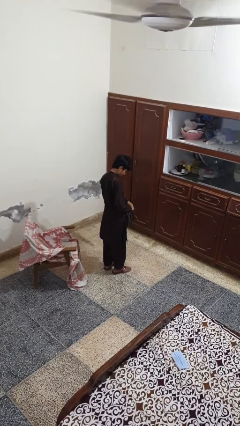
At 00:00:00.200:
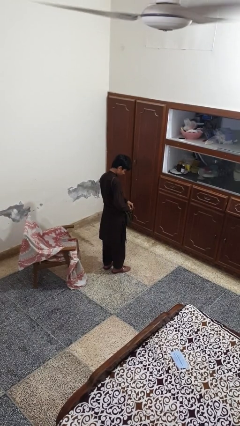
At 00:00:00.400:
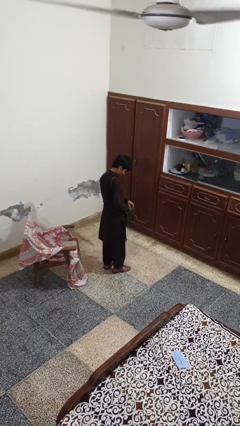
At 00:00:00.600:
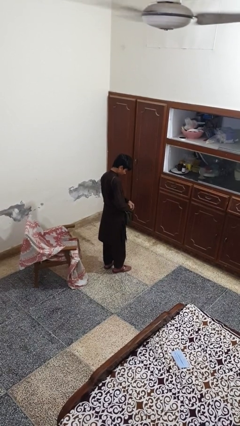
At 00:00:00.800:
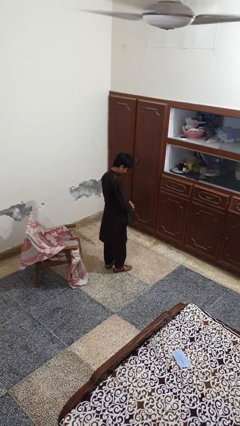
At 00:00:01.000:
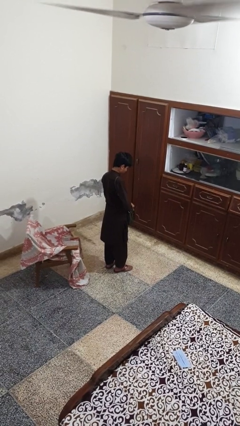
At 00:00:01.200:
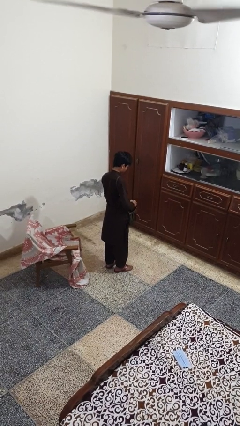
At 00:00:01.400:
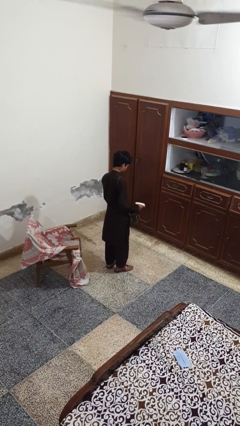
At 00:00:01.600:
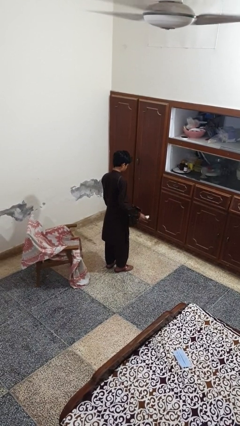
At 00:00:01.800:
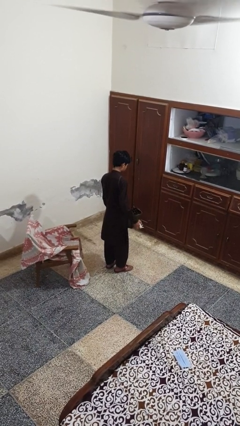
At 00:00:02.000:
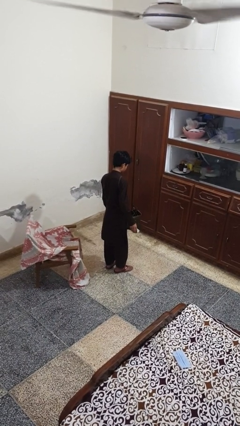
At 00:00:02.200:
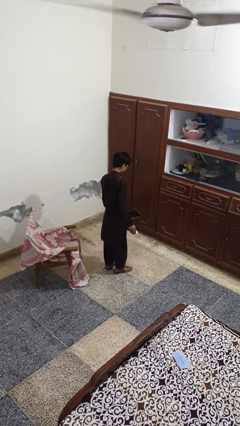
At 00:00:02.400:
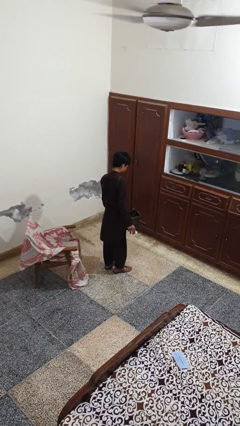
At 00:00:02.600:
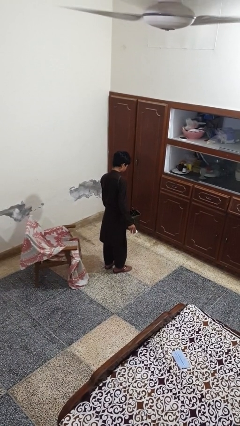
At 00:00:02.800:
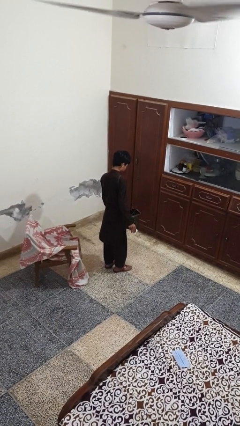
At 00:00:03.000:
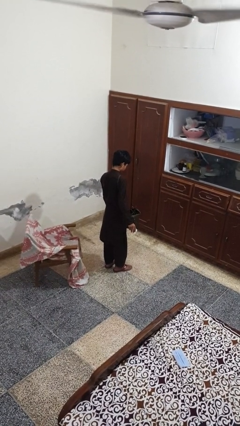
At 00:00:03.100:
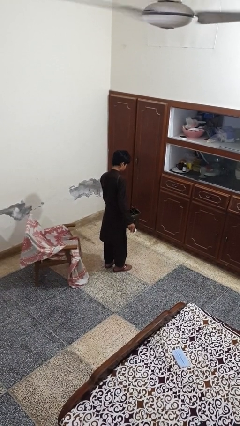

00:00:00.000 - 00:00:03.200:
person takes object from purse

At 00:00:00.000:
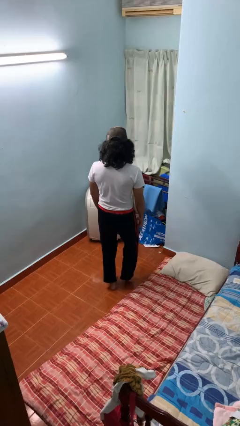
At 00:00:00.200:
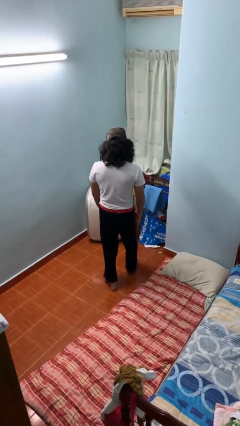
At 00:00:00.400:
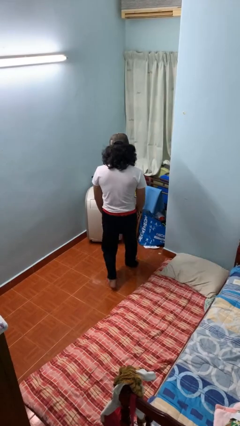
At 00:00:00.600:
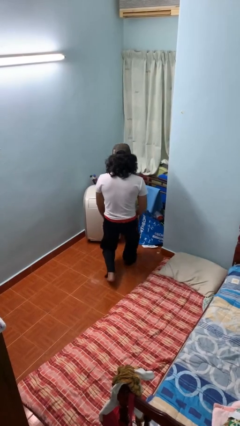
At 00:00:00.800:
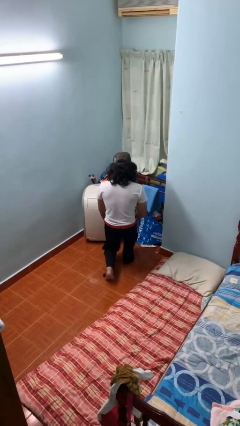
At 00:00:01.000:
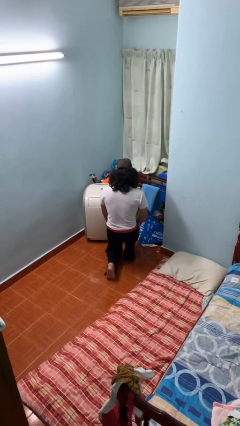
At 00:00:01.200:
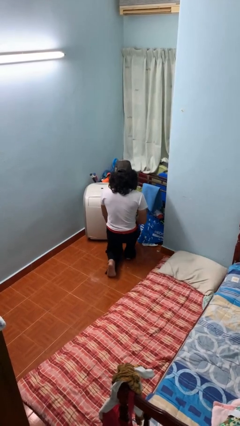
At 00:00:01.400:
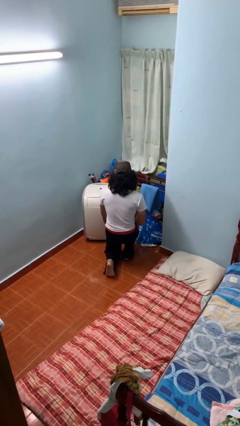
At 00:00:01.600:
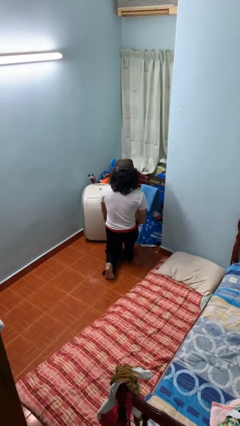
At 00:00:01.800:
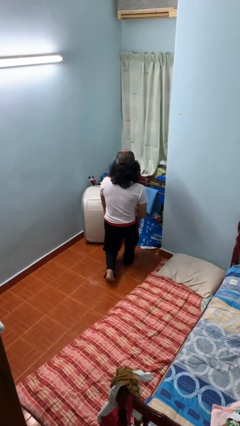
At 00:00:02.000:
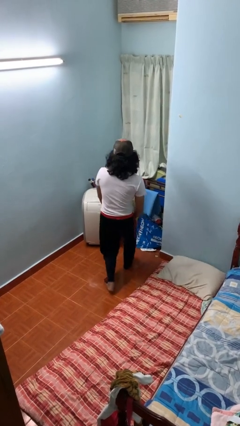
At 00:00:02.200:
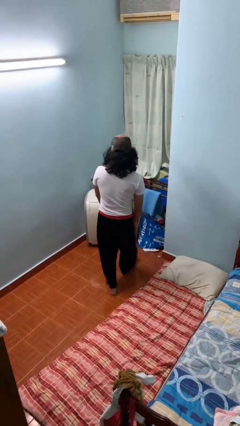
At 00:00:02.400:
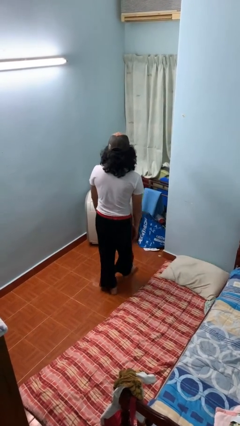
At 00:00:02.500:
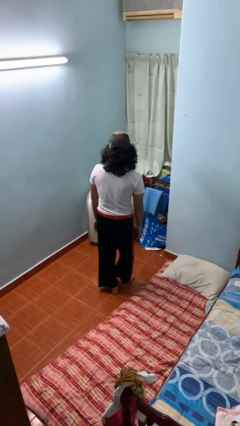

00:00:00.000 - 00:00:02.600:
person exercises with lunges

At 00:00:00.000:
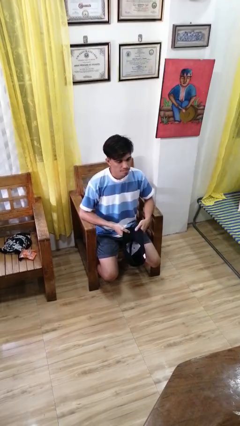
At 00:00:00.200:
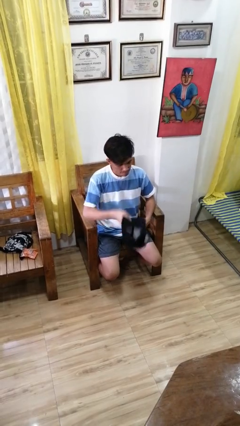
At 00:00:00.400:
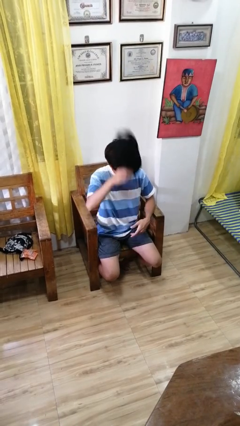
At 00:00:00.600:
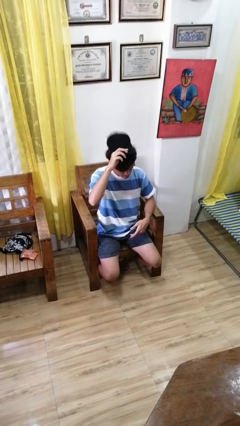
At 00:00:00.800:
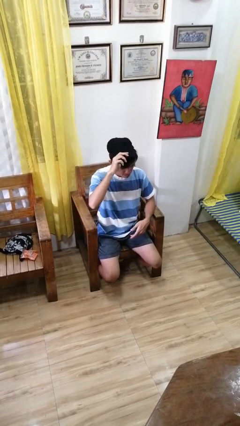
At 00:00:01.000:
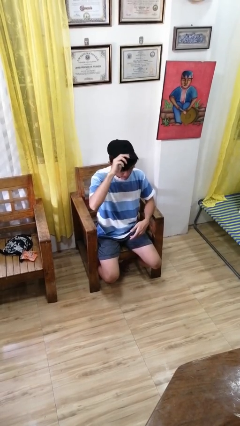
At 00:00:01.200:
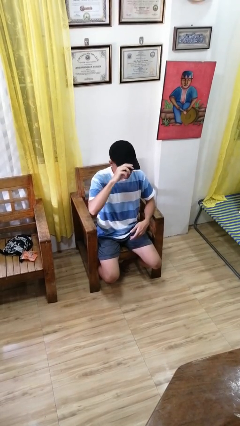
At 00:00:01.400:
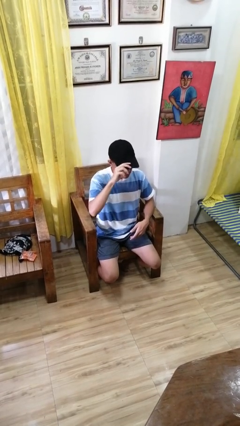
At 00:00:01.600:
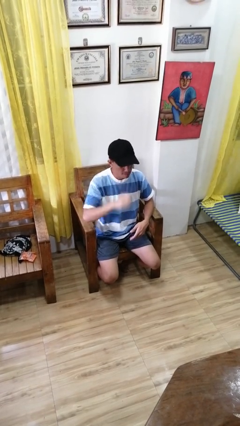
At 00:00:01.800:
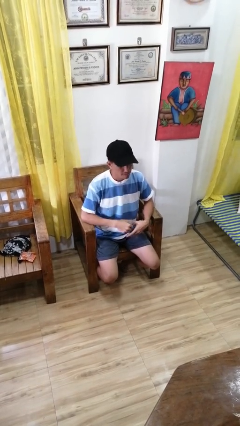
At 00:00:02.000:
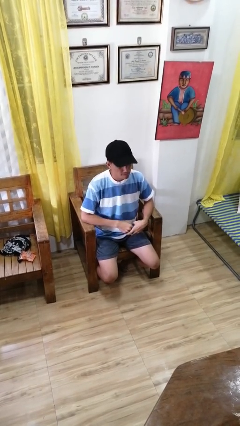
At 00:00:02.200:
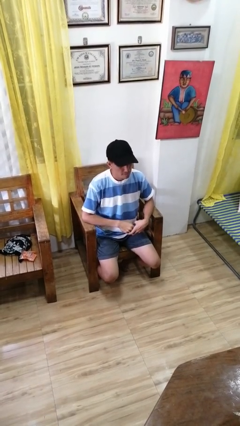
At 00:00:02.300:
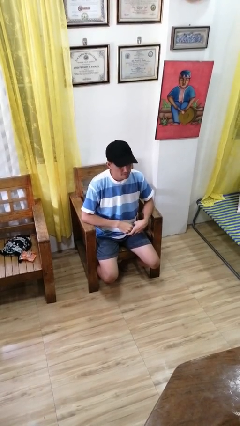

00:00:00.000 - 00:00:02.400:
person puts on hat

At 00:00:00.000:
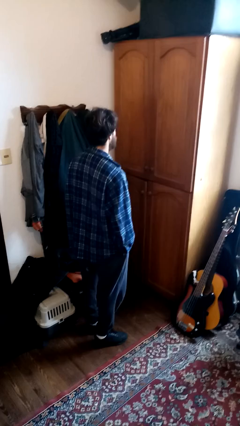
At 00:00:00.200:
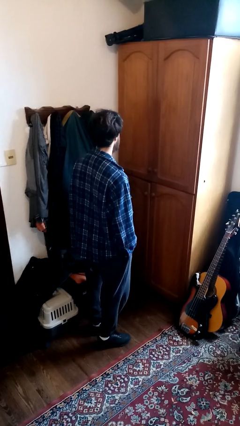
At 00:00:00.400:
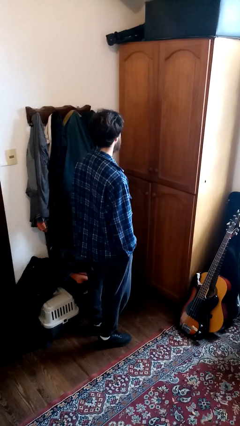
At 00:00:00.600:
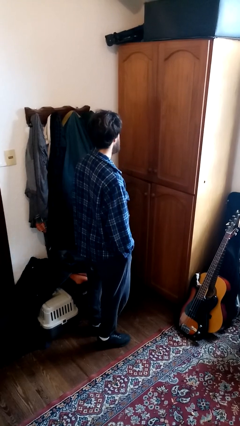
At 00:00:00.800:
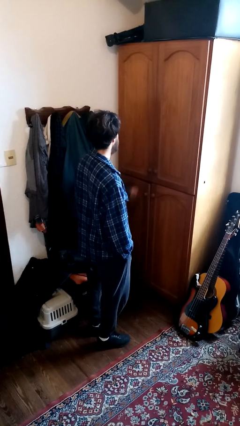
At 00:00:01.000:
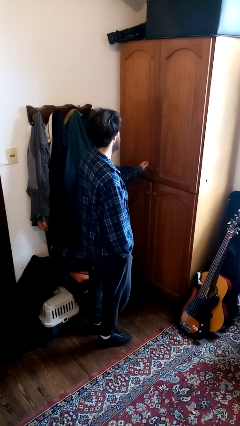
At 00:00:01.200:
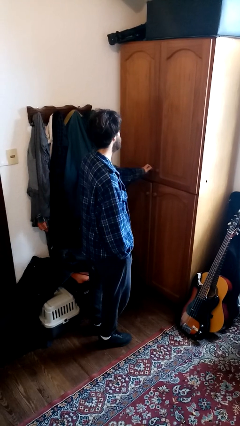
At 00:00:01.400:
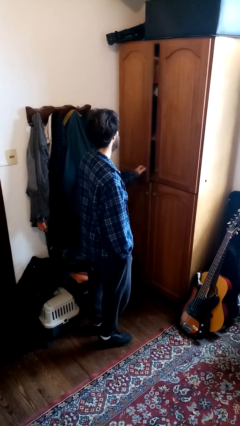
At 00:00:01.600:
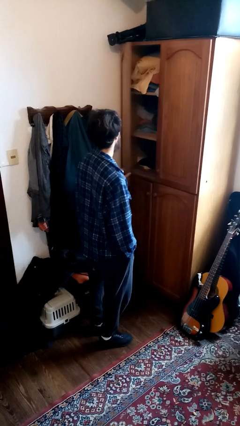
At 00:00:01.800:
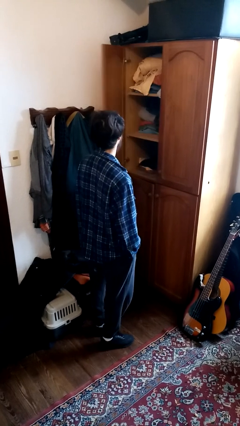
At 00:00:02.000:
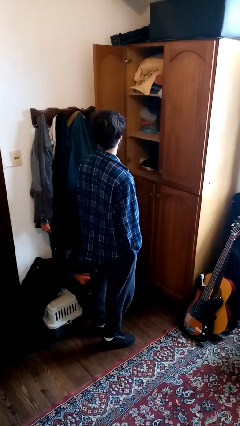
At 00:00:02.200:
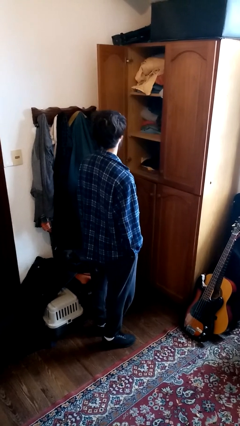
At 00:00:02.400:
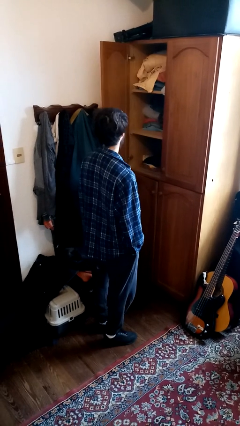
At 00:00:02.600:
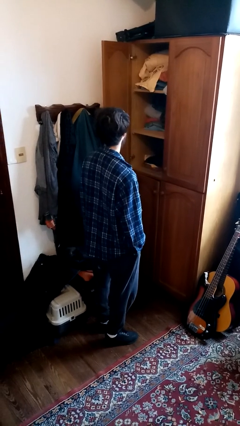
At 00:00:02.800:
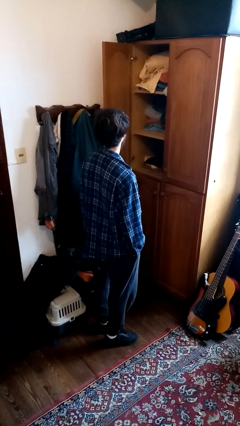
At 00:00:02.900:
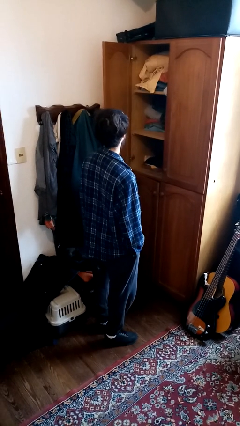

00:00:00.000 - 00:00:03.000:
person opens dresser drawer

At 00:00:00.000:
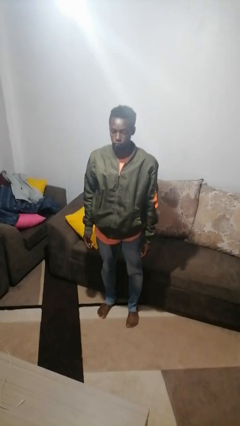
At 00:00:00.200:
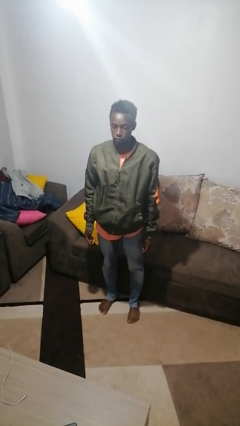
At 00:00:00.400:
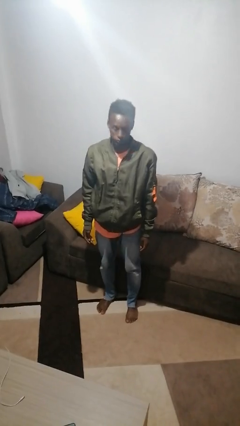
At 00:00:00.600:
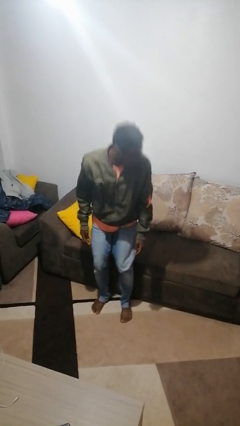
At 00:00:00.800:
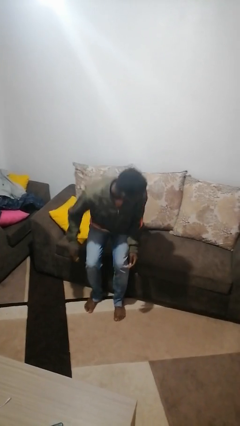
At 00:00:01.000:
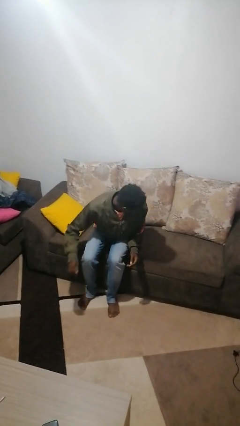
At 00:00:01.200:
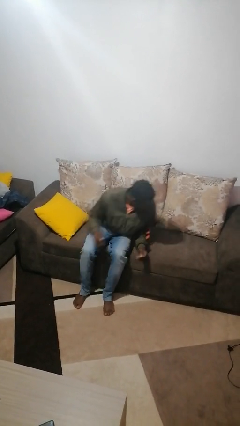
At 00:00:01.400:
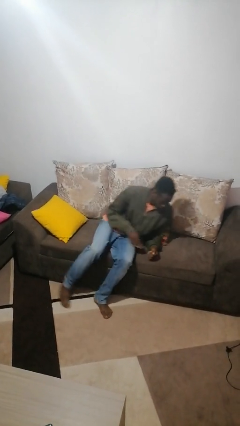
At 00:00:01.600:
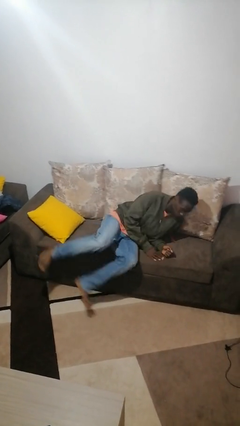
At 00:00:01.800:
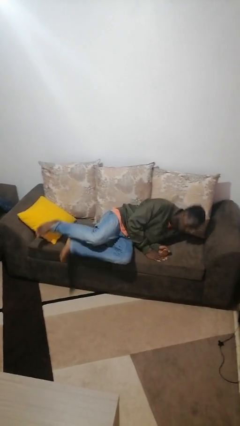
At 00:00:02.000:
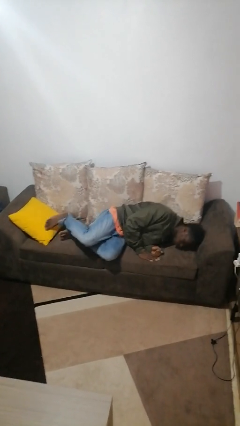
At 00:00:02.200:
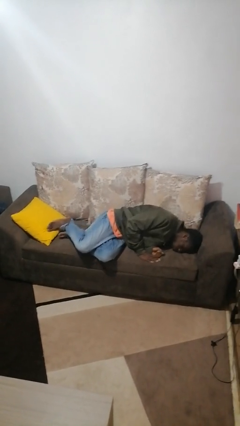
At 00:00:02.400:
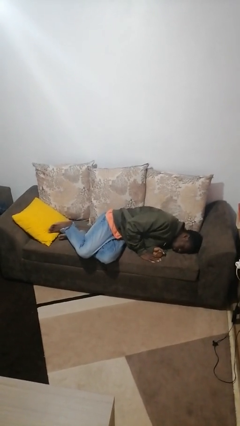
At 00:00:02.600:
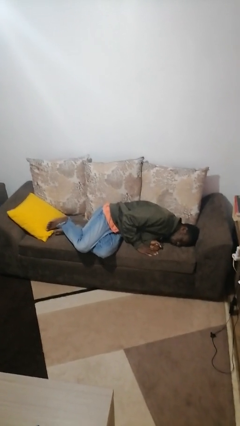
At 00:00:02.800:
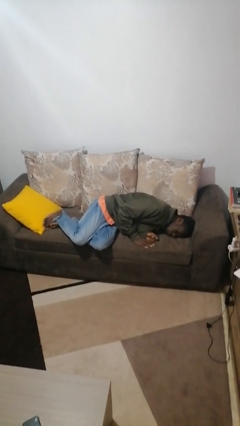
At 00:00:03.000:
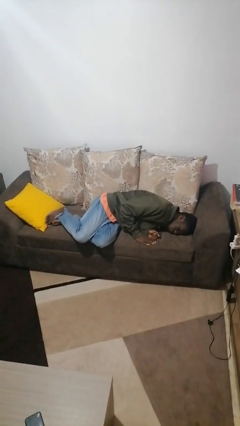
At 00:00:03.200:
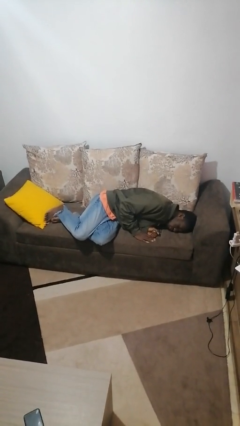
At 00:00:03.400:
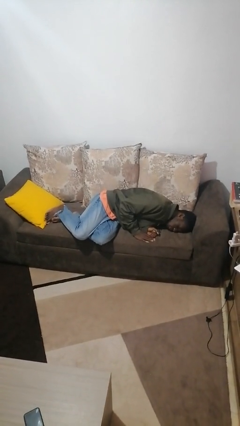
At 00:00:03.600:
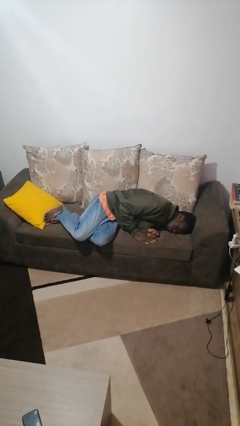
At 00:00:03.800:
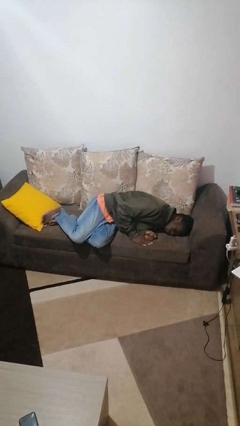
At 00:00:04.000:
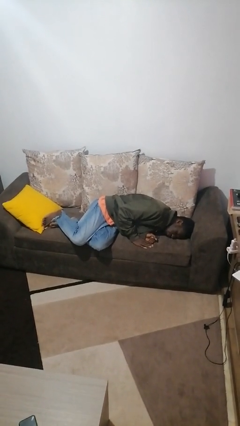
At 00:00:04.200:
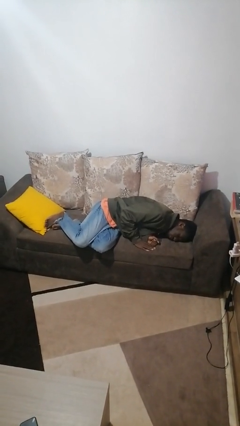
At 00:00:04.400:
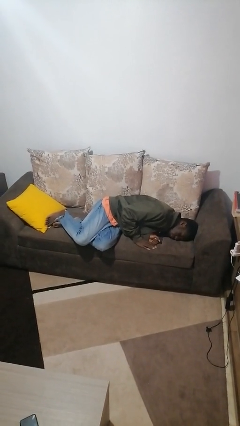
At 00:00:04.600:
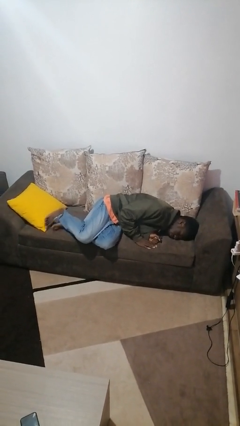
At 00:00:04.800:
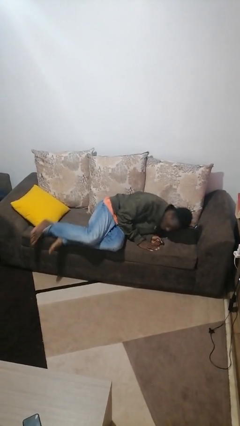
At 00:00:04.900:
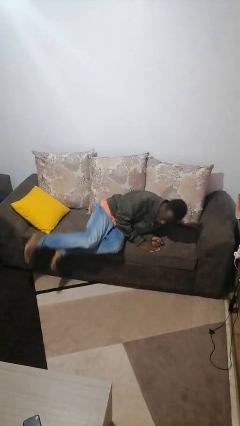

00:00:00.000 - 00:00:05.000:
person lies down on couch

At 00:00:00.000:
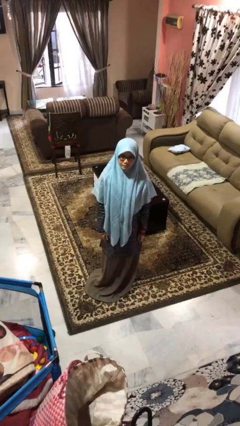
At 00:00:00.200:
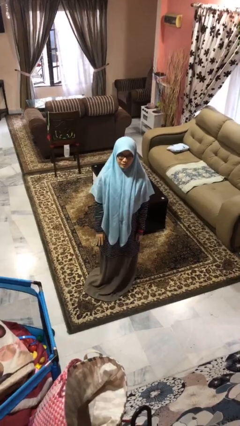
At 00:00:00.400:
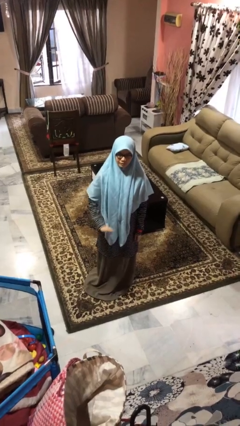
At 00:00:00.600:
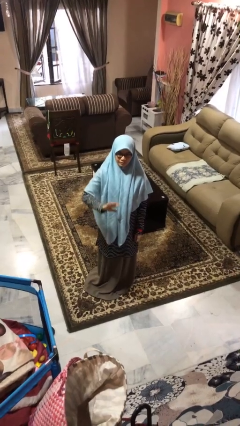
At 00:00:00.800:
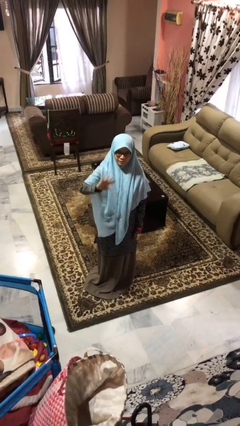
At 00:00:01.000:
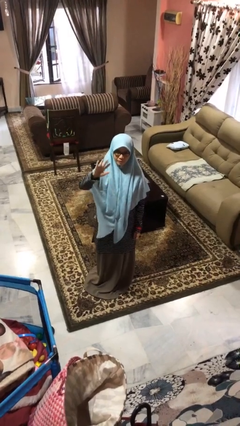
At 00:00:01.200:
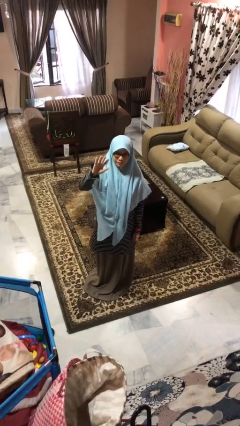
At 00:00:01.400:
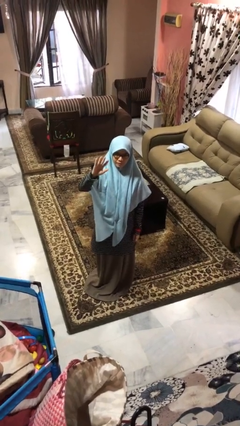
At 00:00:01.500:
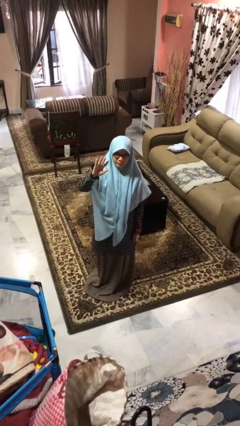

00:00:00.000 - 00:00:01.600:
person gestures swipe up
